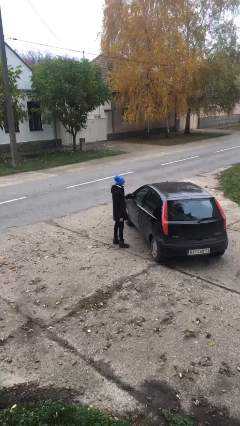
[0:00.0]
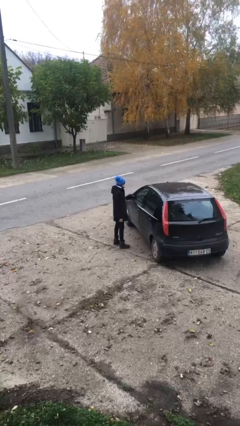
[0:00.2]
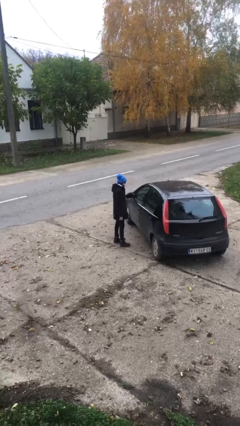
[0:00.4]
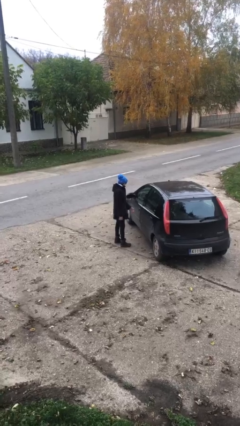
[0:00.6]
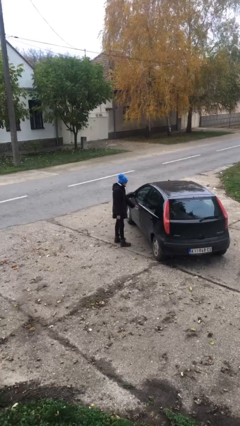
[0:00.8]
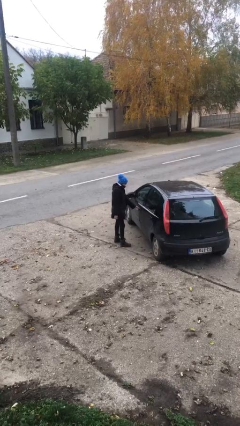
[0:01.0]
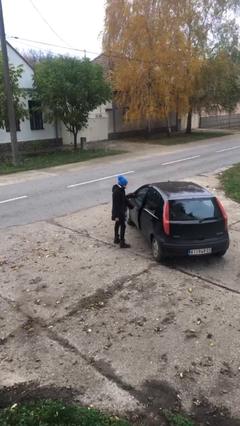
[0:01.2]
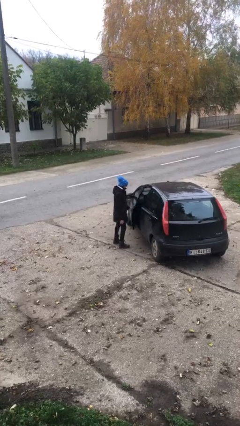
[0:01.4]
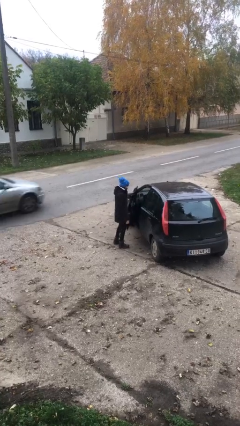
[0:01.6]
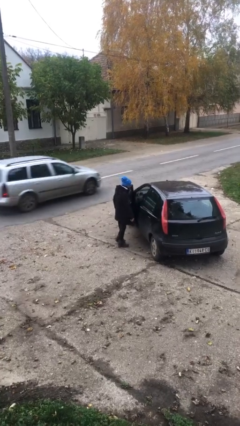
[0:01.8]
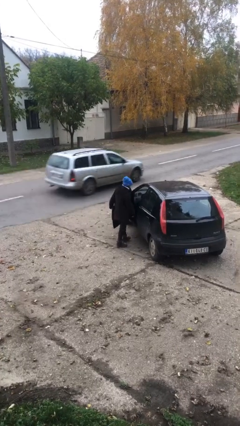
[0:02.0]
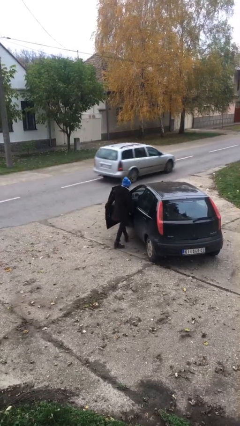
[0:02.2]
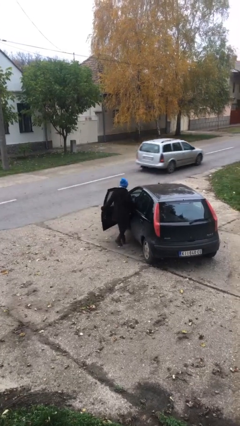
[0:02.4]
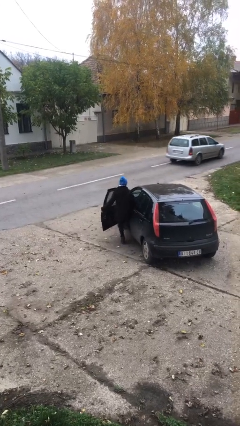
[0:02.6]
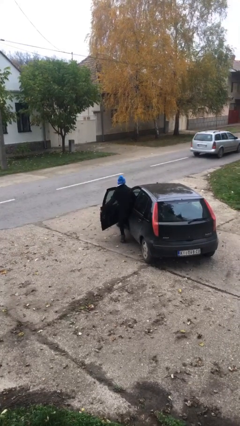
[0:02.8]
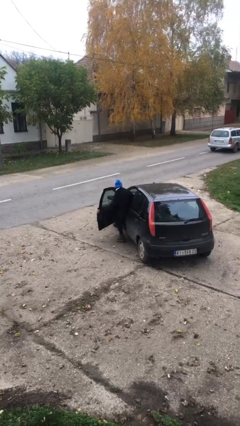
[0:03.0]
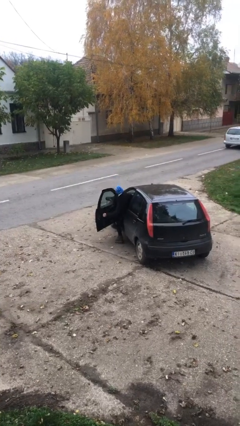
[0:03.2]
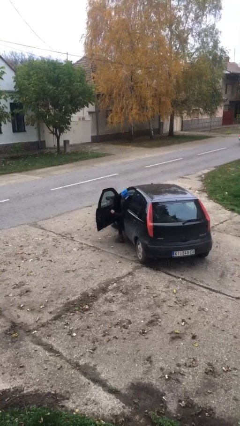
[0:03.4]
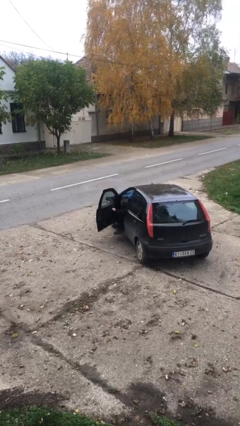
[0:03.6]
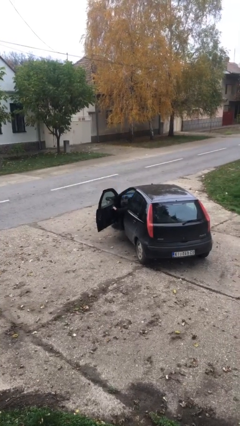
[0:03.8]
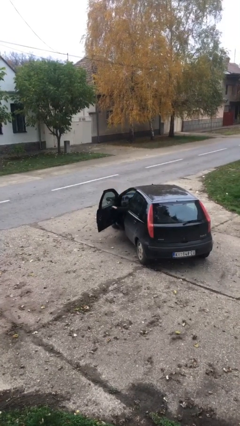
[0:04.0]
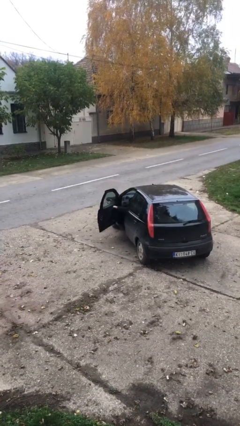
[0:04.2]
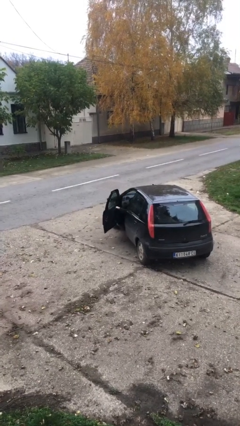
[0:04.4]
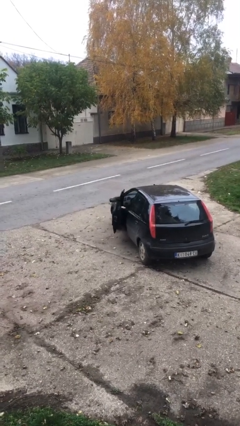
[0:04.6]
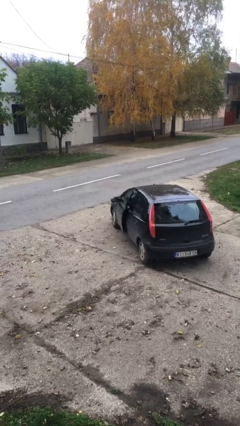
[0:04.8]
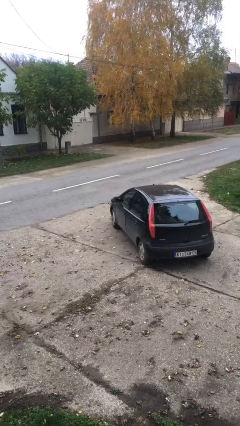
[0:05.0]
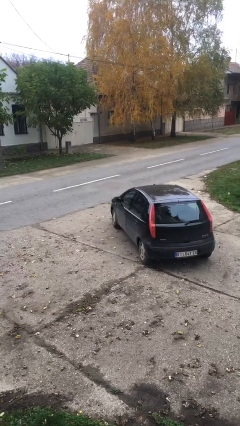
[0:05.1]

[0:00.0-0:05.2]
person enters car

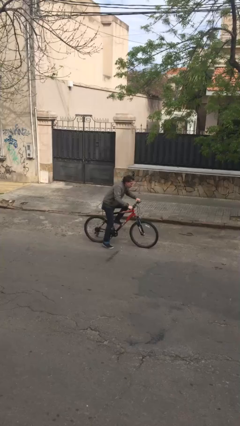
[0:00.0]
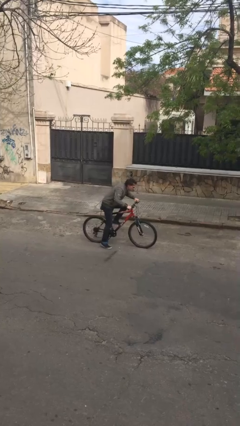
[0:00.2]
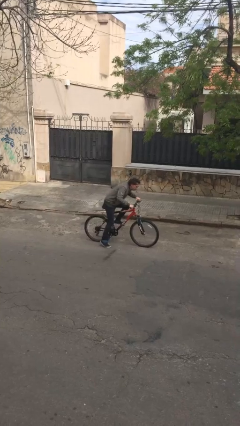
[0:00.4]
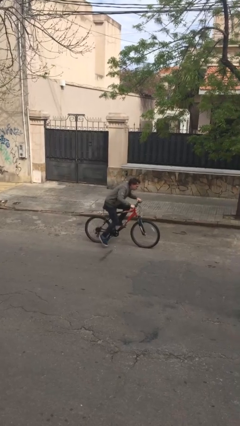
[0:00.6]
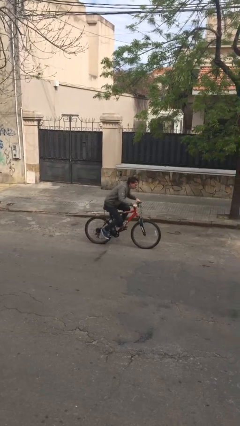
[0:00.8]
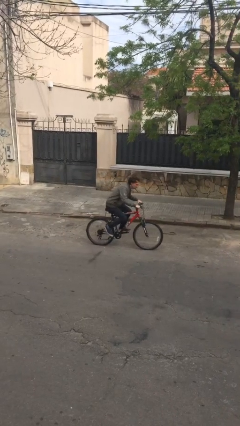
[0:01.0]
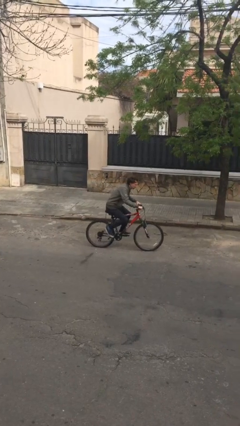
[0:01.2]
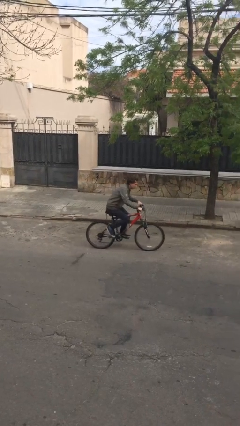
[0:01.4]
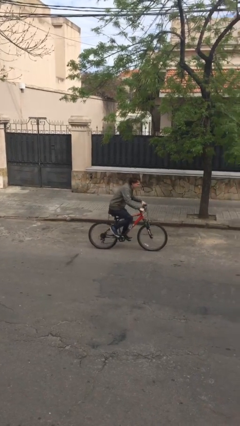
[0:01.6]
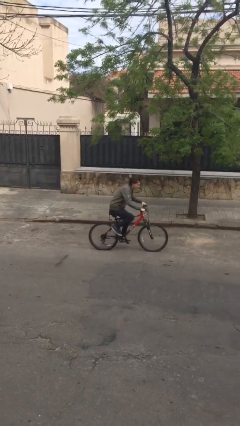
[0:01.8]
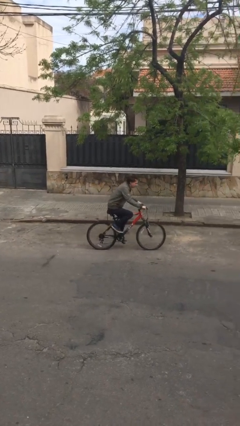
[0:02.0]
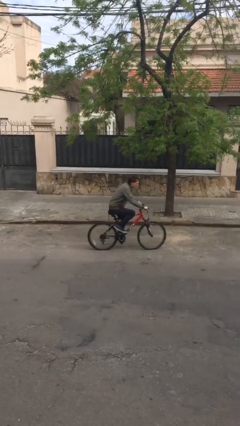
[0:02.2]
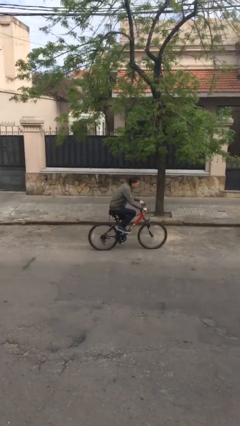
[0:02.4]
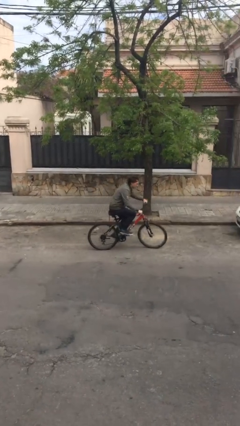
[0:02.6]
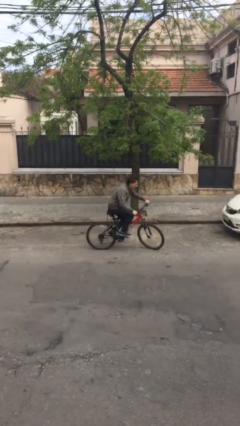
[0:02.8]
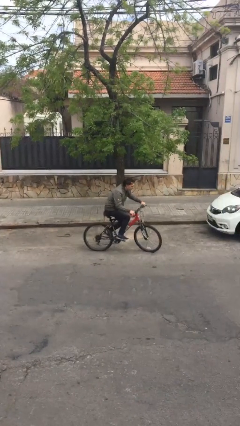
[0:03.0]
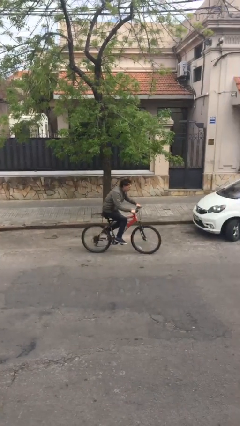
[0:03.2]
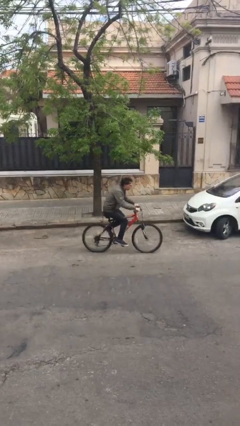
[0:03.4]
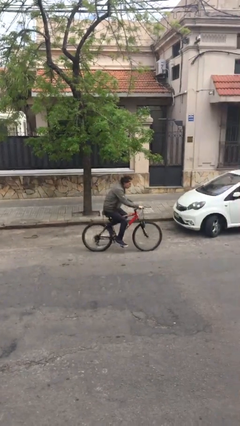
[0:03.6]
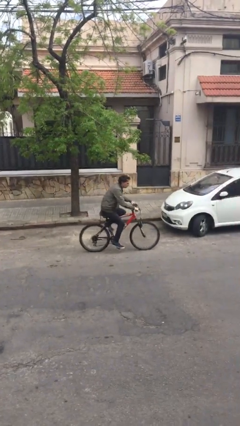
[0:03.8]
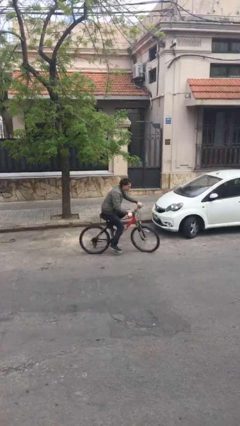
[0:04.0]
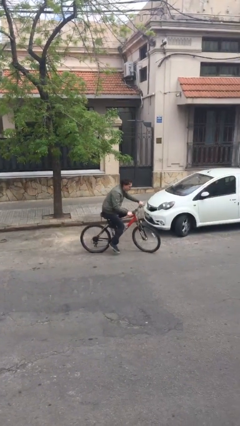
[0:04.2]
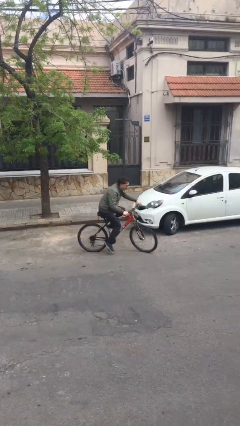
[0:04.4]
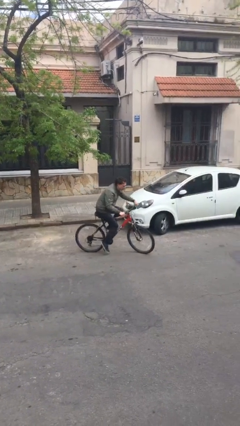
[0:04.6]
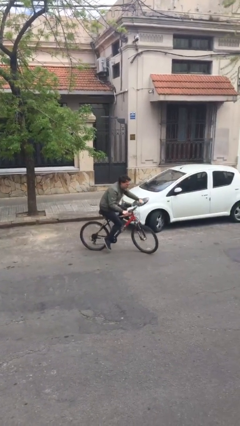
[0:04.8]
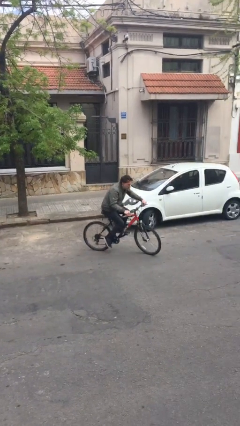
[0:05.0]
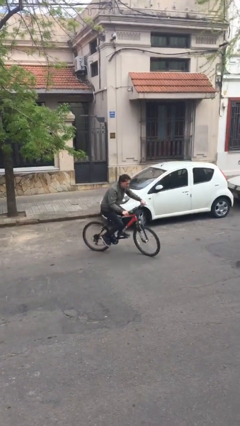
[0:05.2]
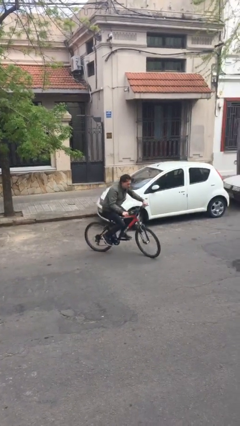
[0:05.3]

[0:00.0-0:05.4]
person rides bicycle

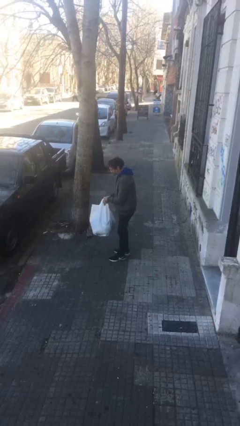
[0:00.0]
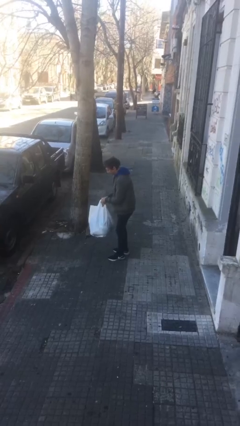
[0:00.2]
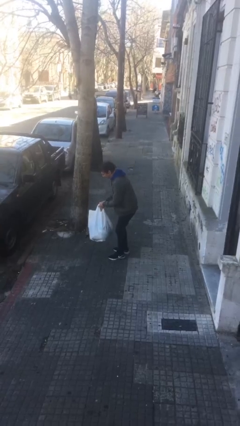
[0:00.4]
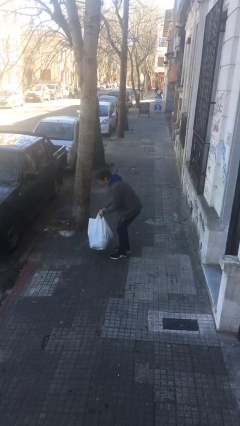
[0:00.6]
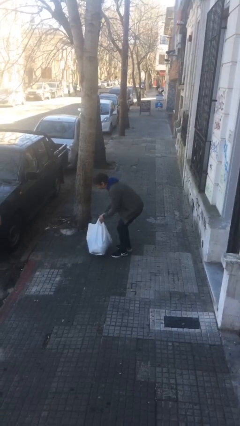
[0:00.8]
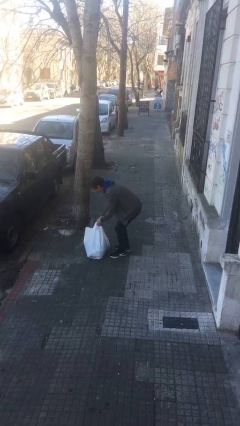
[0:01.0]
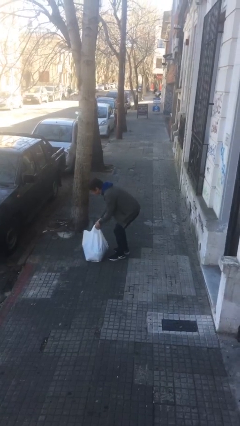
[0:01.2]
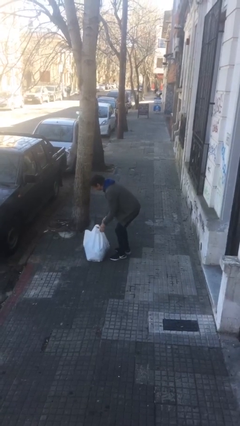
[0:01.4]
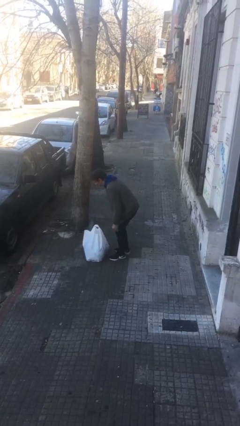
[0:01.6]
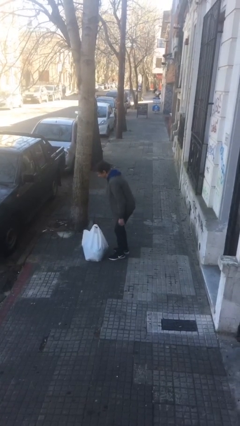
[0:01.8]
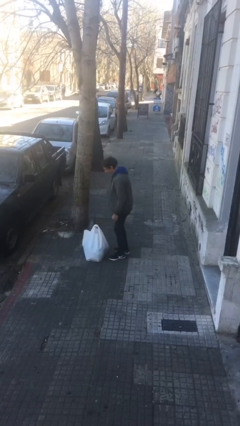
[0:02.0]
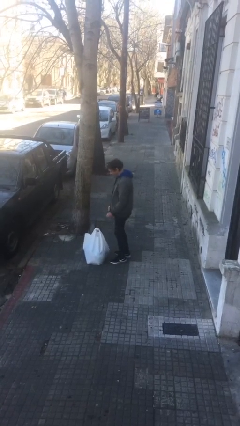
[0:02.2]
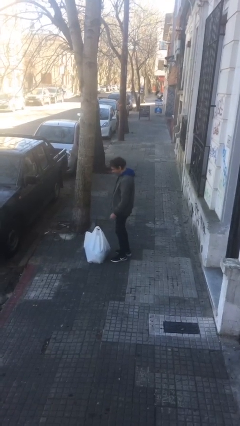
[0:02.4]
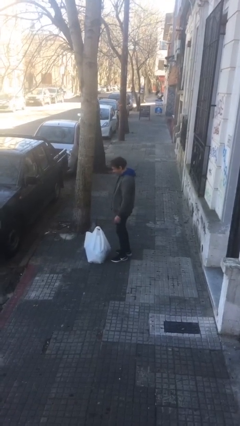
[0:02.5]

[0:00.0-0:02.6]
person puts down object on floor

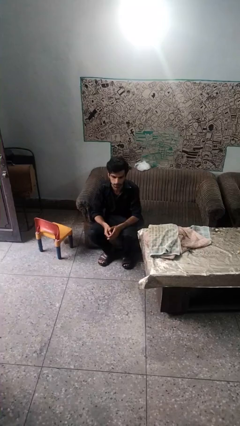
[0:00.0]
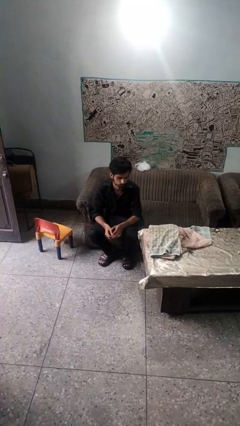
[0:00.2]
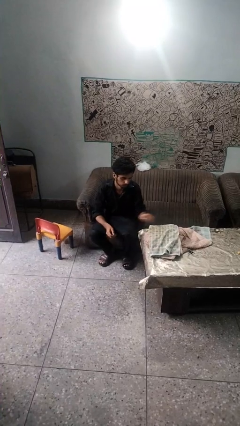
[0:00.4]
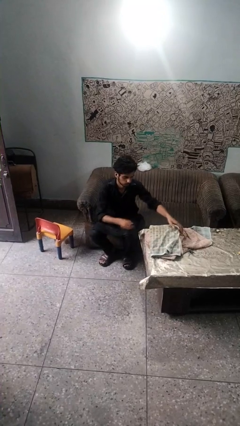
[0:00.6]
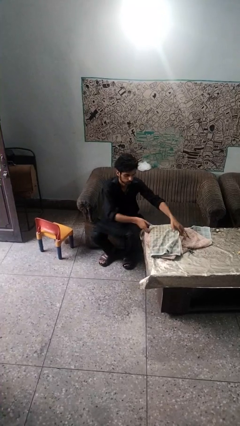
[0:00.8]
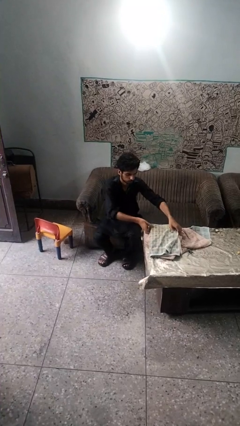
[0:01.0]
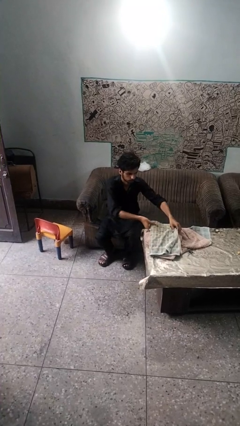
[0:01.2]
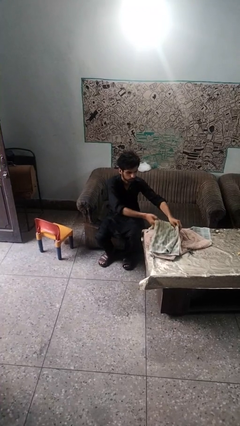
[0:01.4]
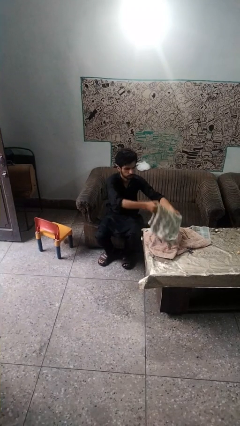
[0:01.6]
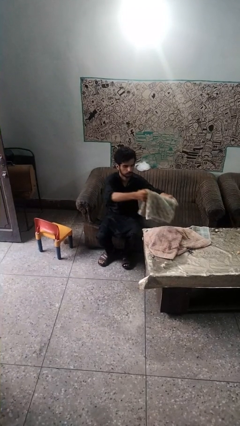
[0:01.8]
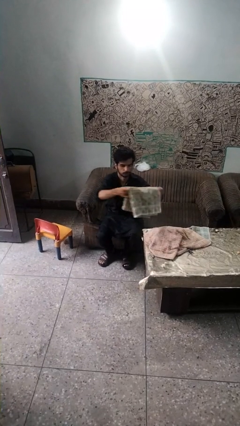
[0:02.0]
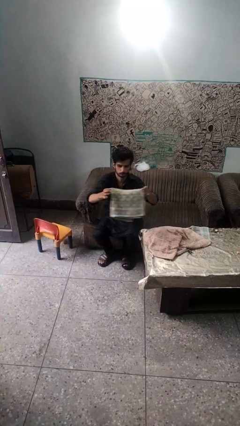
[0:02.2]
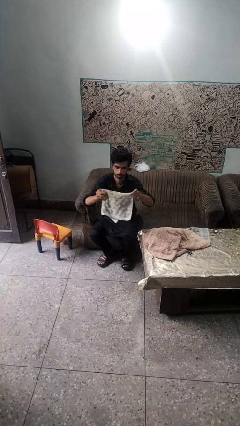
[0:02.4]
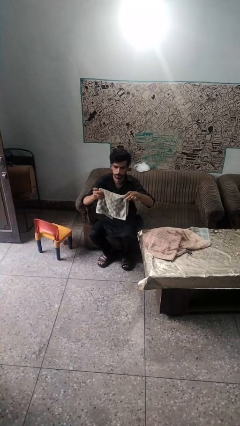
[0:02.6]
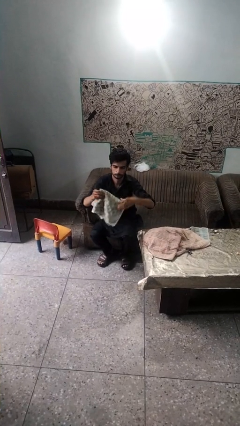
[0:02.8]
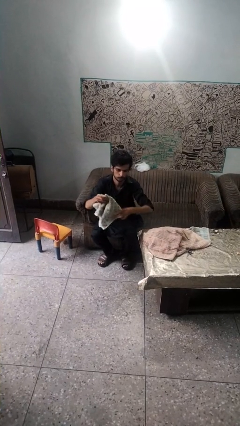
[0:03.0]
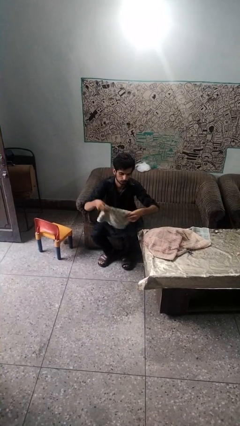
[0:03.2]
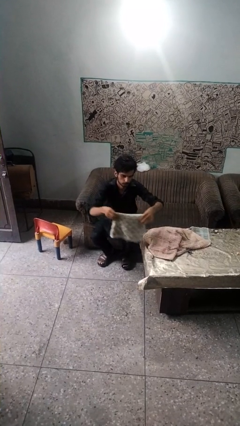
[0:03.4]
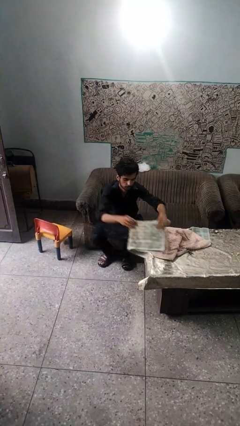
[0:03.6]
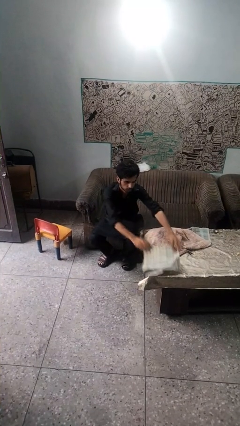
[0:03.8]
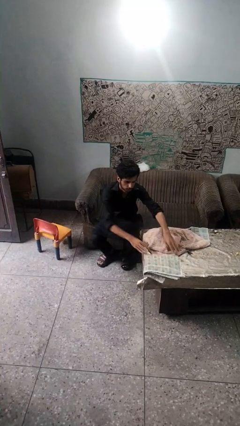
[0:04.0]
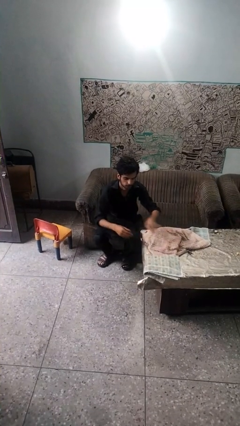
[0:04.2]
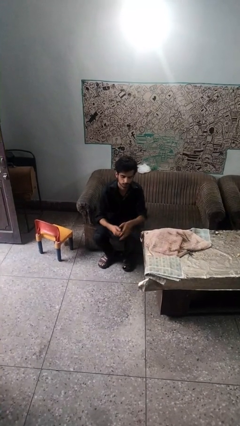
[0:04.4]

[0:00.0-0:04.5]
person folds towel

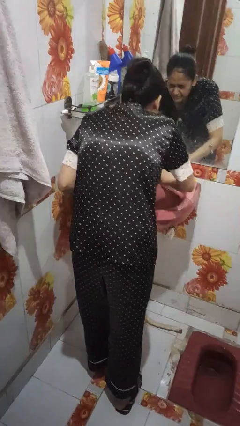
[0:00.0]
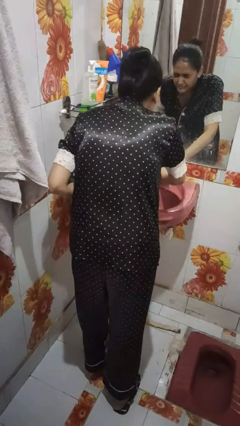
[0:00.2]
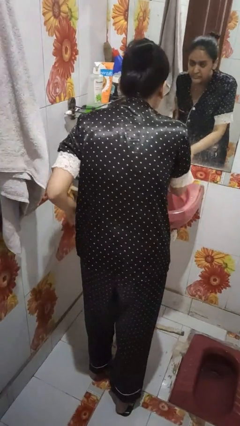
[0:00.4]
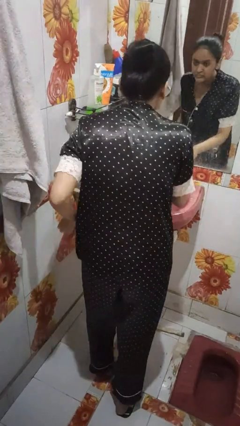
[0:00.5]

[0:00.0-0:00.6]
person washes face
